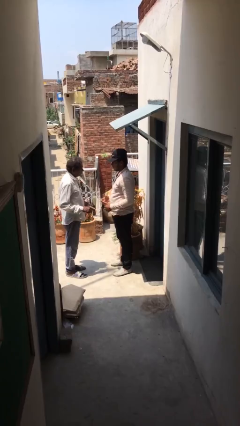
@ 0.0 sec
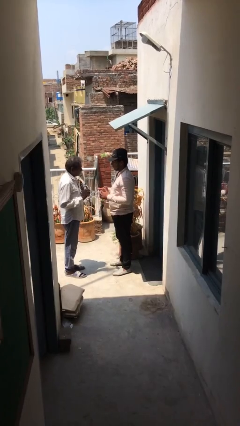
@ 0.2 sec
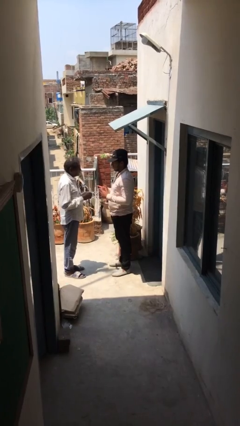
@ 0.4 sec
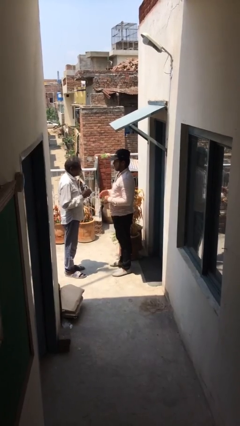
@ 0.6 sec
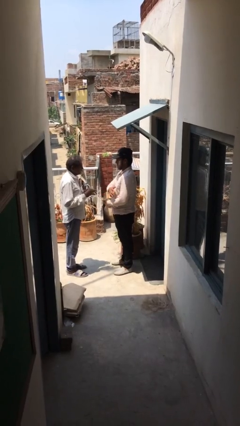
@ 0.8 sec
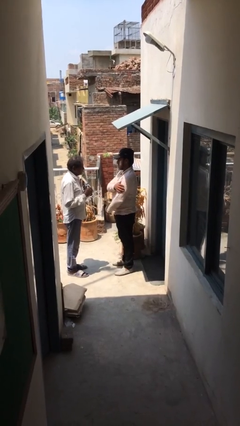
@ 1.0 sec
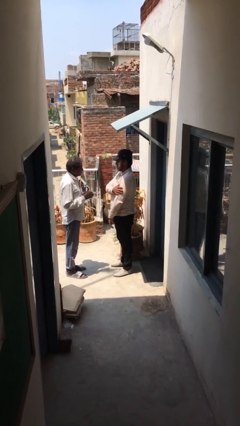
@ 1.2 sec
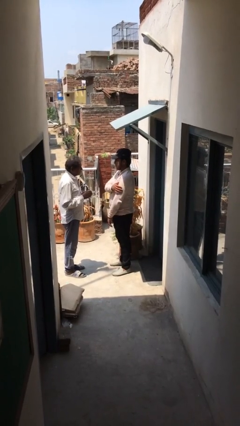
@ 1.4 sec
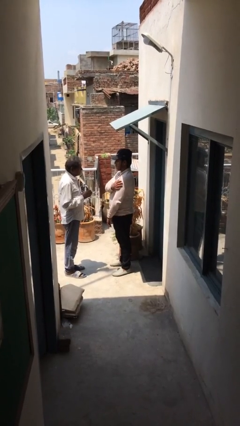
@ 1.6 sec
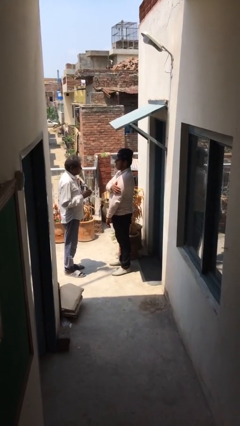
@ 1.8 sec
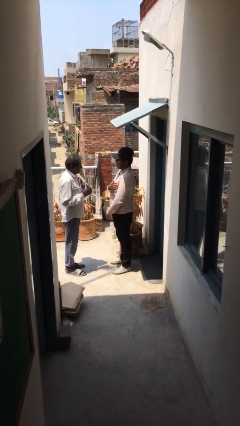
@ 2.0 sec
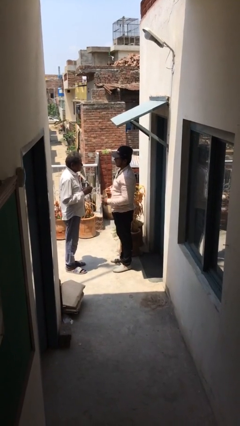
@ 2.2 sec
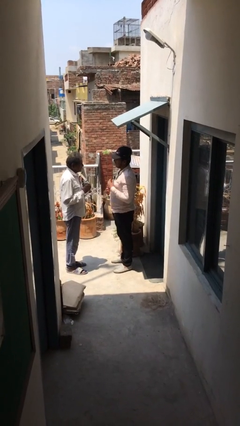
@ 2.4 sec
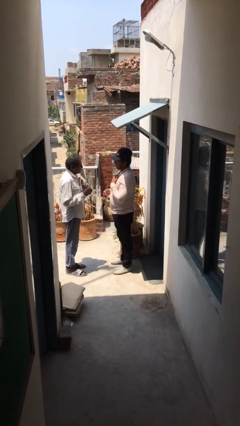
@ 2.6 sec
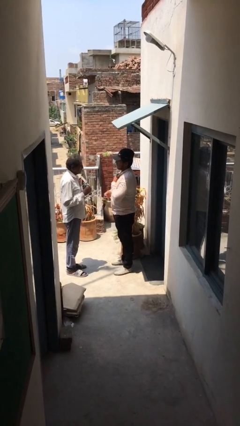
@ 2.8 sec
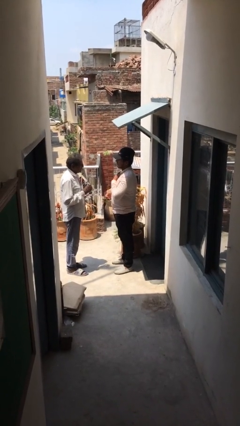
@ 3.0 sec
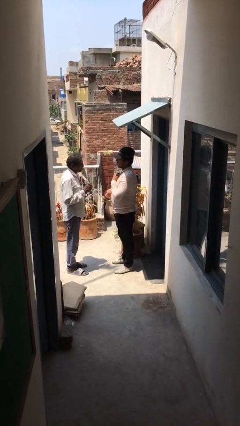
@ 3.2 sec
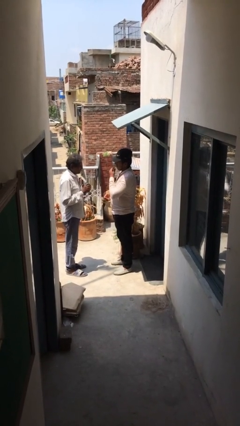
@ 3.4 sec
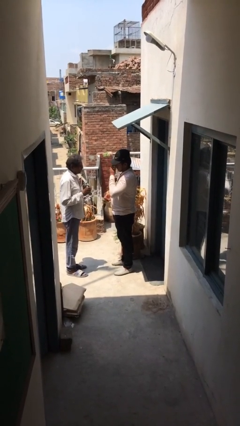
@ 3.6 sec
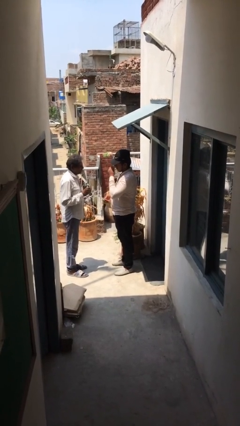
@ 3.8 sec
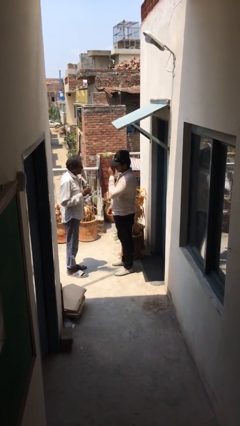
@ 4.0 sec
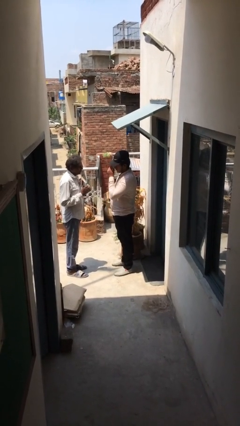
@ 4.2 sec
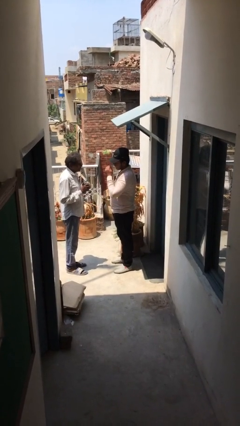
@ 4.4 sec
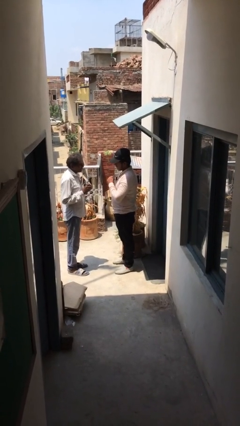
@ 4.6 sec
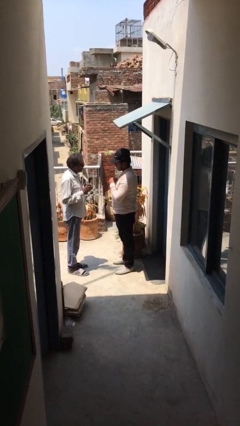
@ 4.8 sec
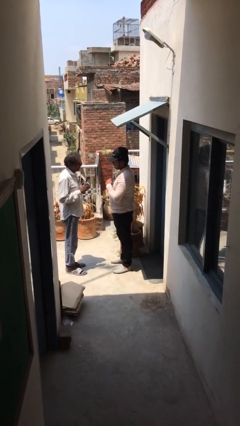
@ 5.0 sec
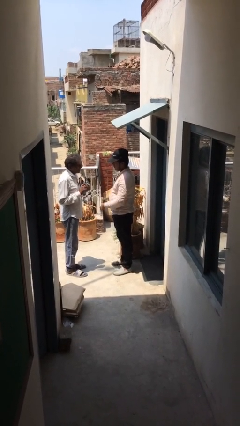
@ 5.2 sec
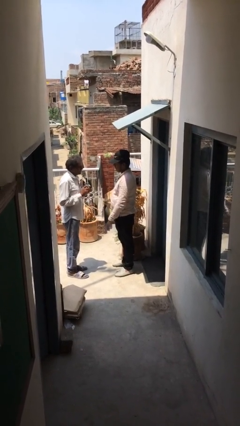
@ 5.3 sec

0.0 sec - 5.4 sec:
person talks to person

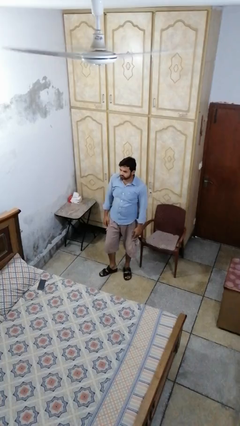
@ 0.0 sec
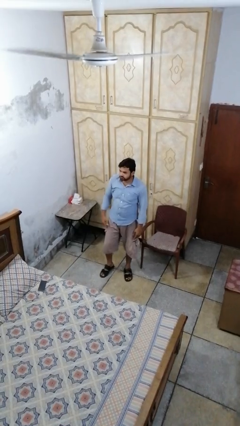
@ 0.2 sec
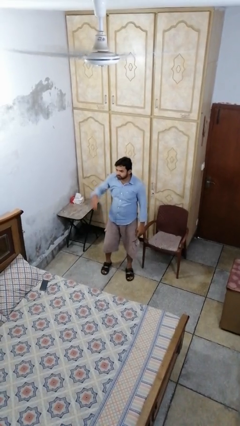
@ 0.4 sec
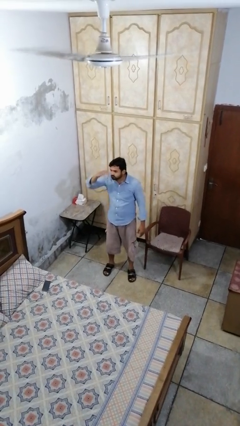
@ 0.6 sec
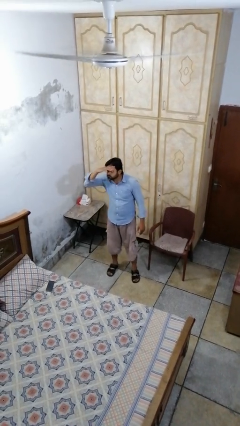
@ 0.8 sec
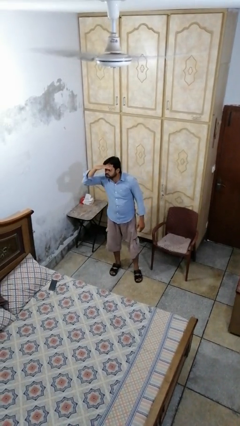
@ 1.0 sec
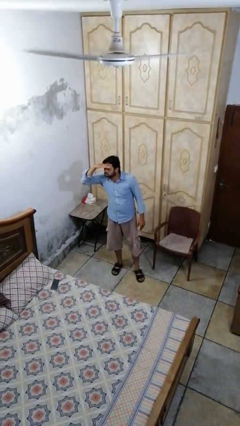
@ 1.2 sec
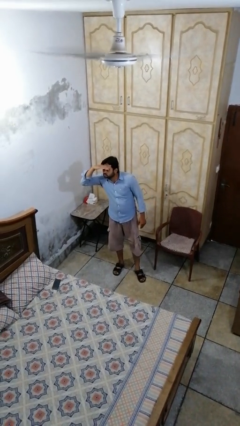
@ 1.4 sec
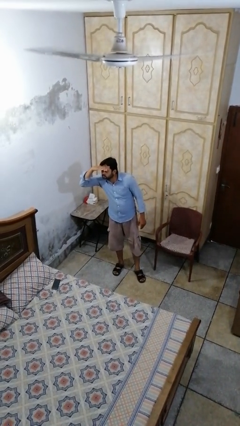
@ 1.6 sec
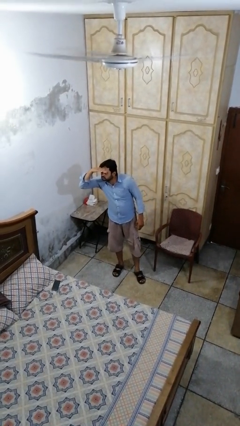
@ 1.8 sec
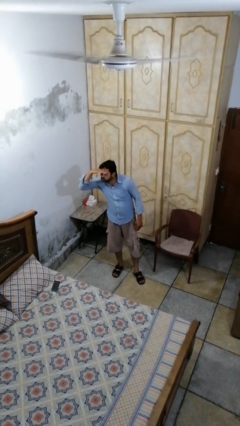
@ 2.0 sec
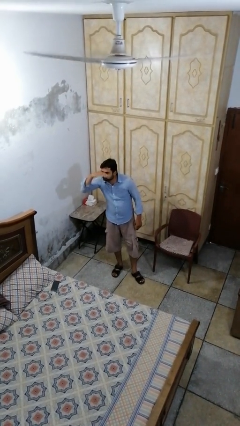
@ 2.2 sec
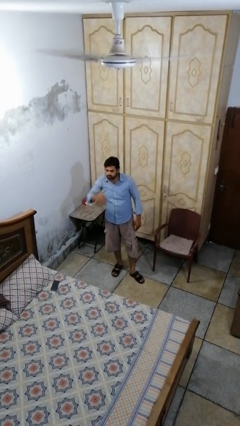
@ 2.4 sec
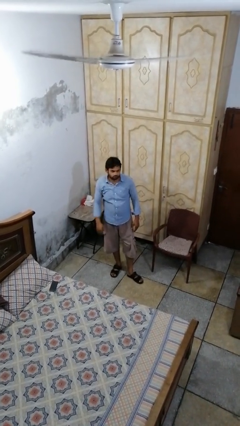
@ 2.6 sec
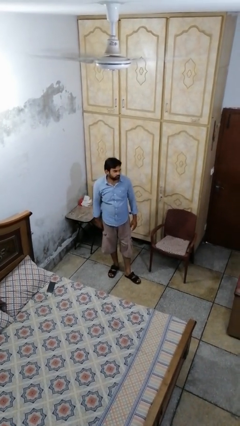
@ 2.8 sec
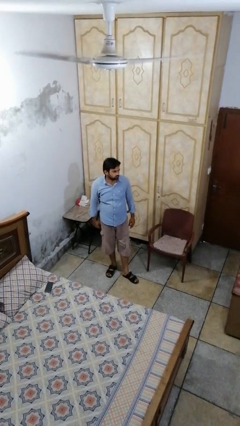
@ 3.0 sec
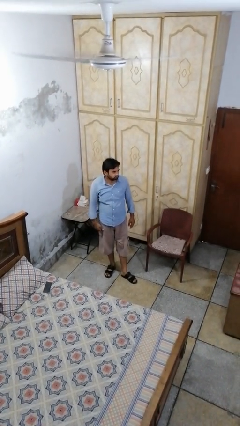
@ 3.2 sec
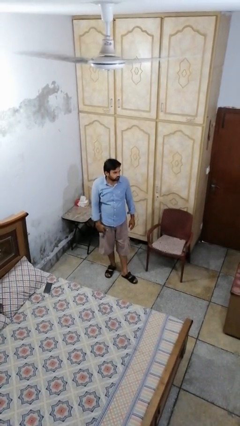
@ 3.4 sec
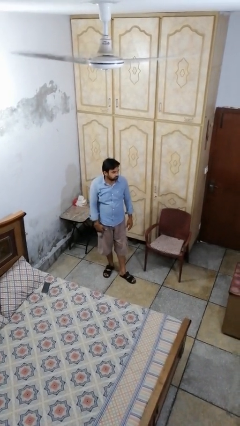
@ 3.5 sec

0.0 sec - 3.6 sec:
person shades eyes

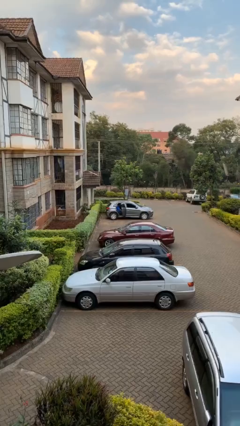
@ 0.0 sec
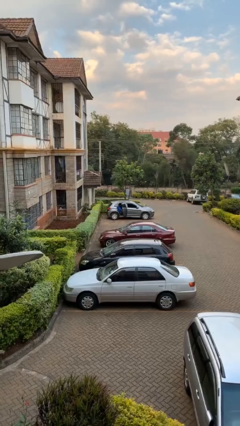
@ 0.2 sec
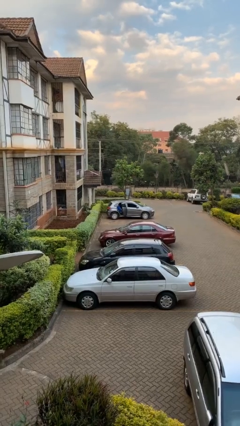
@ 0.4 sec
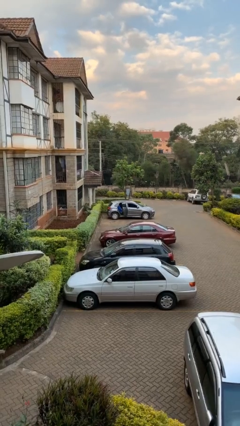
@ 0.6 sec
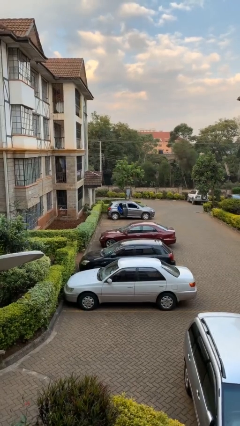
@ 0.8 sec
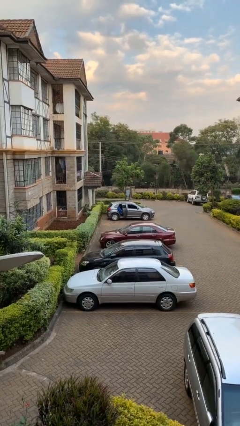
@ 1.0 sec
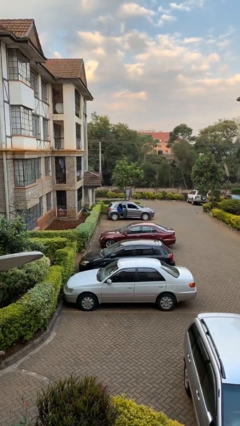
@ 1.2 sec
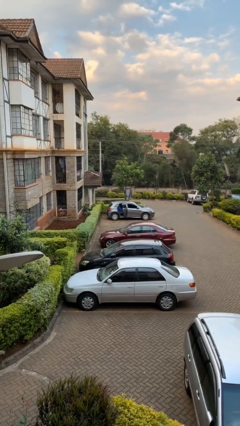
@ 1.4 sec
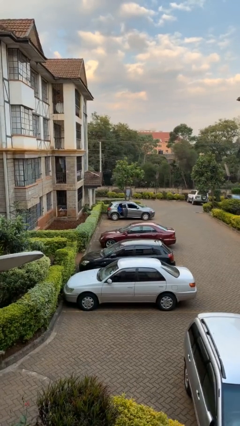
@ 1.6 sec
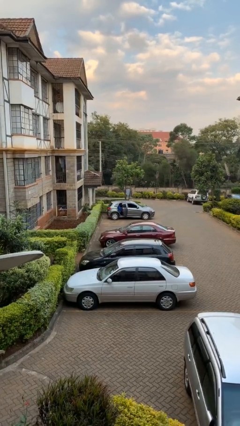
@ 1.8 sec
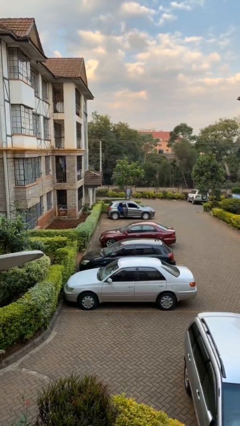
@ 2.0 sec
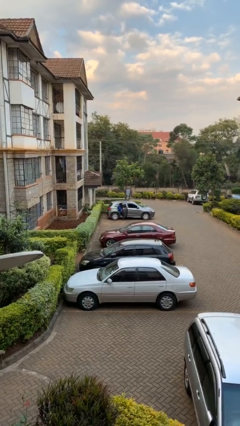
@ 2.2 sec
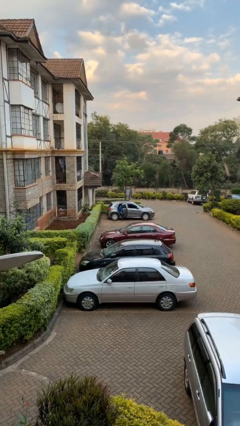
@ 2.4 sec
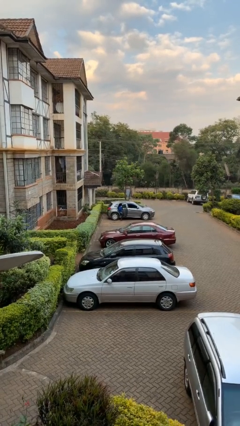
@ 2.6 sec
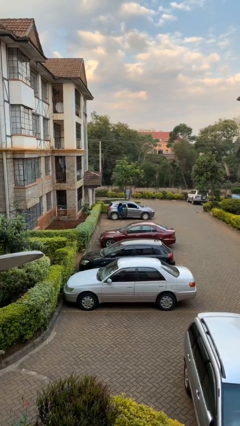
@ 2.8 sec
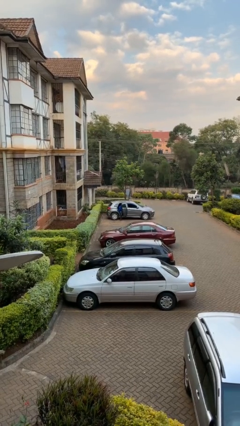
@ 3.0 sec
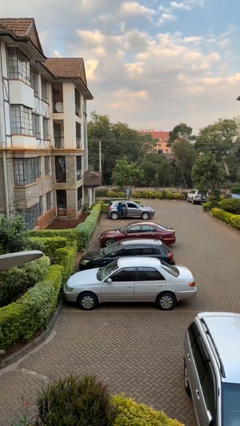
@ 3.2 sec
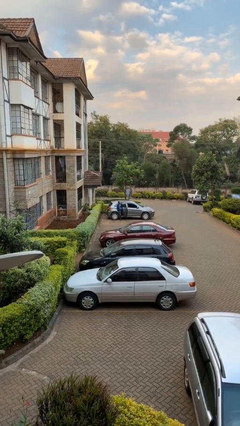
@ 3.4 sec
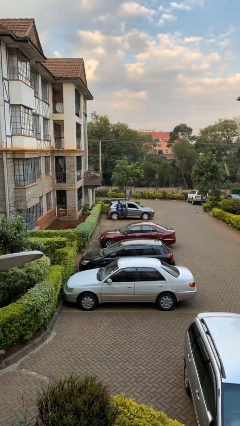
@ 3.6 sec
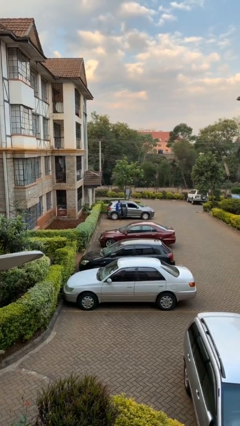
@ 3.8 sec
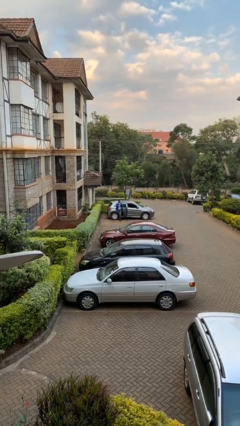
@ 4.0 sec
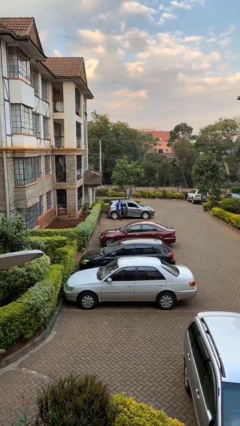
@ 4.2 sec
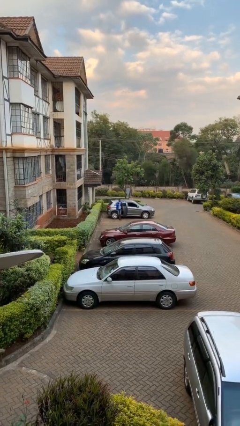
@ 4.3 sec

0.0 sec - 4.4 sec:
person exits car

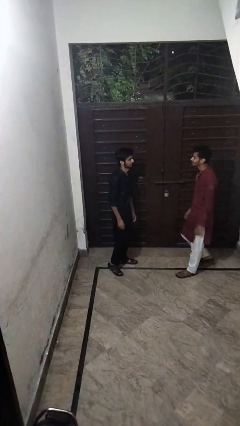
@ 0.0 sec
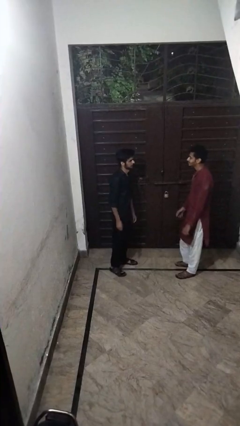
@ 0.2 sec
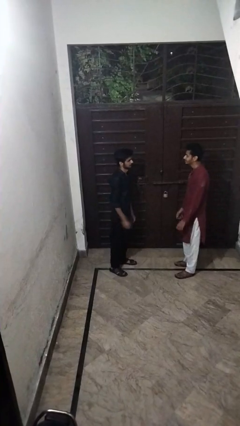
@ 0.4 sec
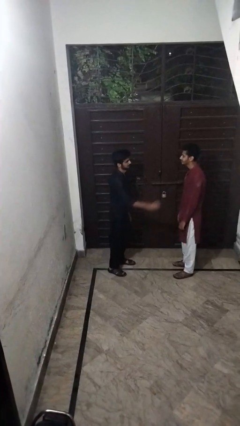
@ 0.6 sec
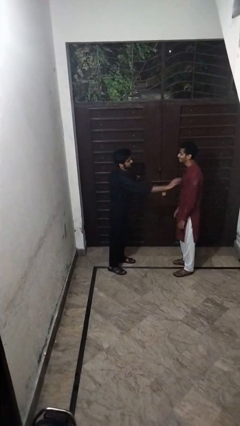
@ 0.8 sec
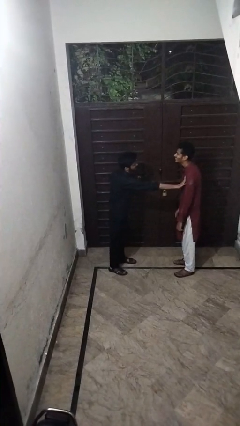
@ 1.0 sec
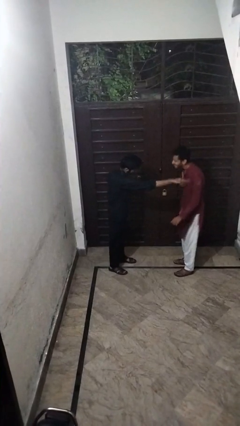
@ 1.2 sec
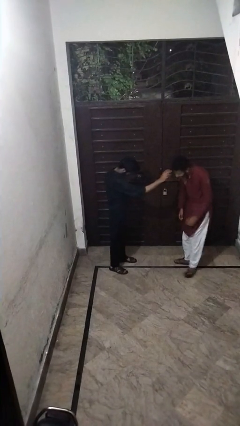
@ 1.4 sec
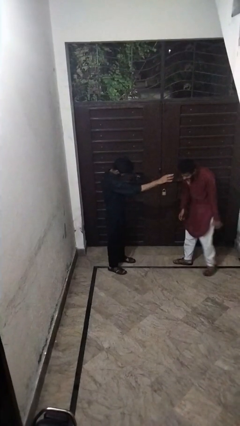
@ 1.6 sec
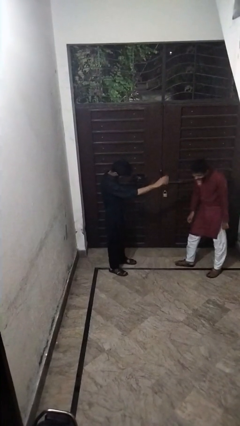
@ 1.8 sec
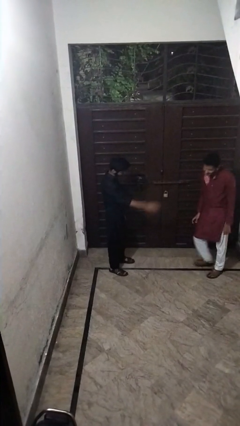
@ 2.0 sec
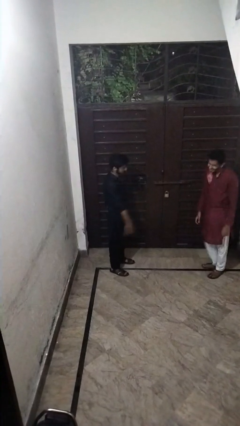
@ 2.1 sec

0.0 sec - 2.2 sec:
person shoves person

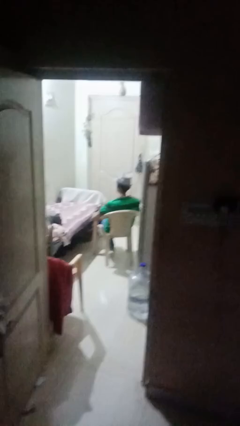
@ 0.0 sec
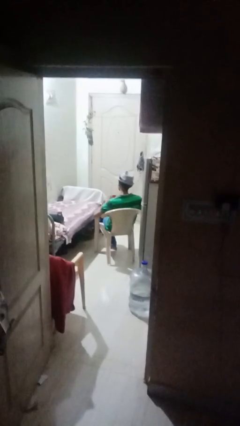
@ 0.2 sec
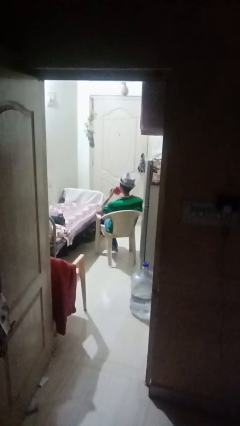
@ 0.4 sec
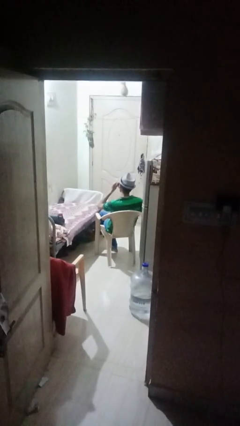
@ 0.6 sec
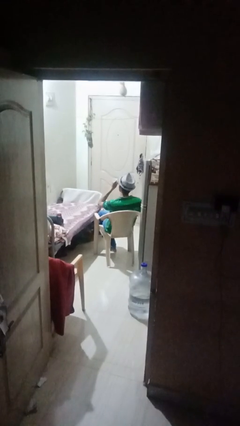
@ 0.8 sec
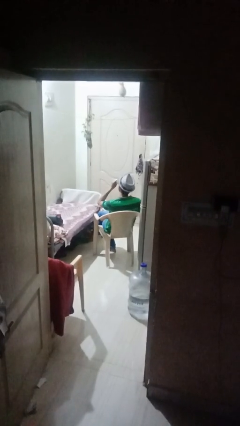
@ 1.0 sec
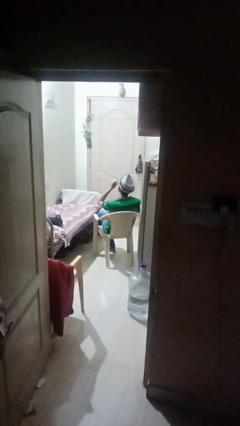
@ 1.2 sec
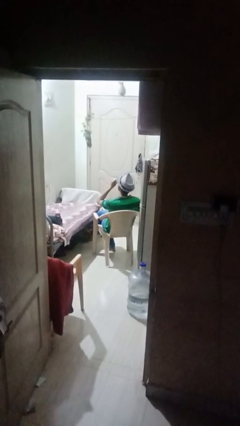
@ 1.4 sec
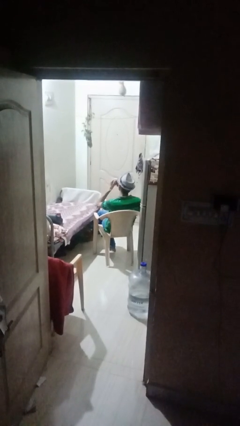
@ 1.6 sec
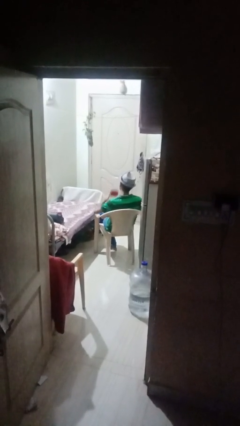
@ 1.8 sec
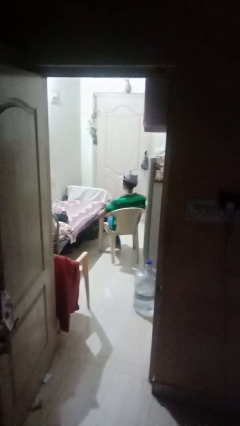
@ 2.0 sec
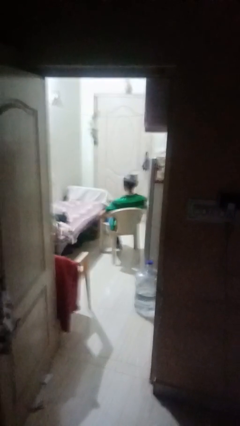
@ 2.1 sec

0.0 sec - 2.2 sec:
person drinks from mug

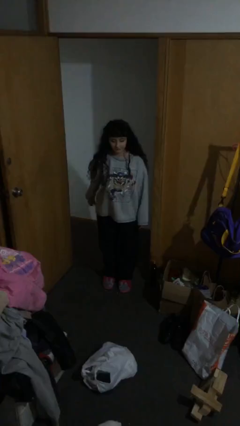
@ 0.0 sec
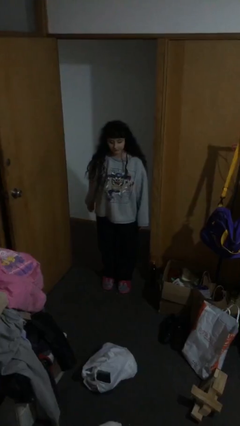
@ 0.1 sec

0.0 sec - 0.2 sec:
person picks up object from floor
